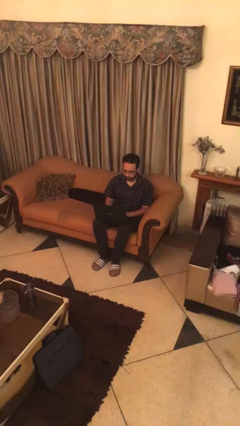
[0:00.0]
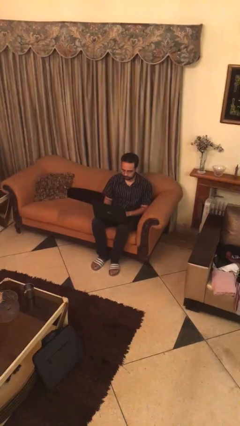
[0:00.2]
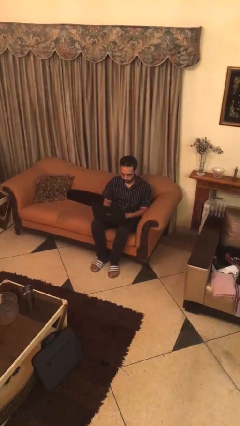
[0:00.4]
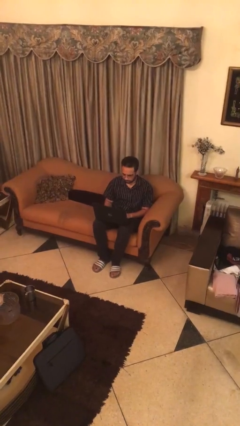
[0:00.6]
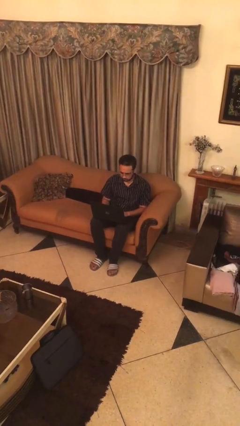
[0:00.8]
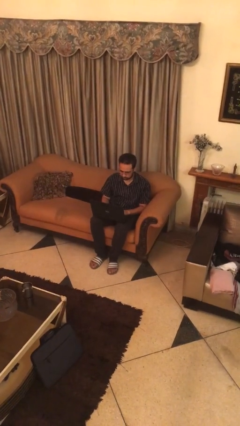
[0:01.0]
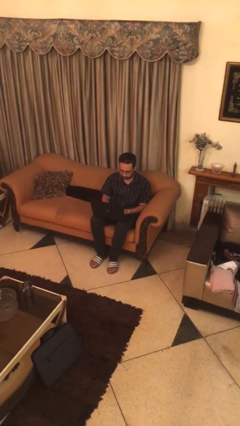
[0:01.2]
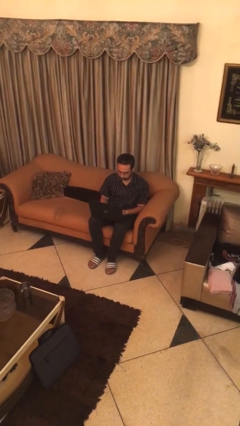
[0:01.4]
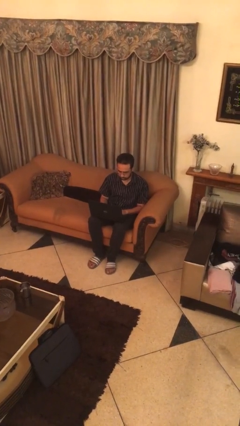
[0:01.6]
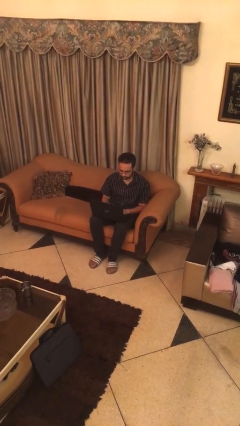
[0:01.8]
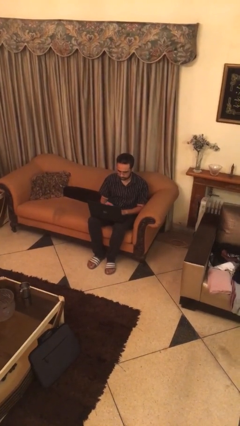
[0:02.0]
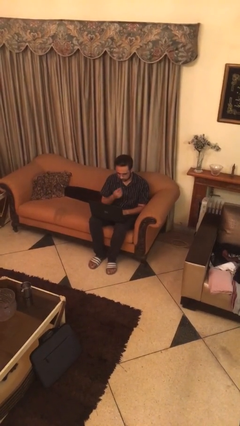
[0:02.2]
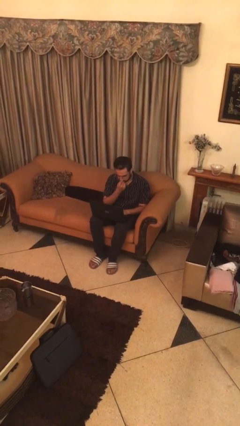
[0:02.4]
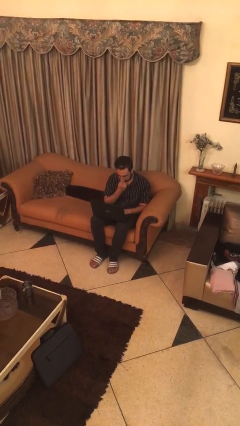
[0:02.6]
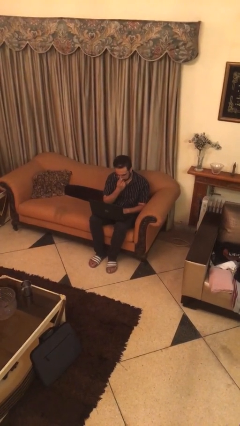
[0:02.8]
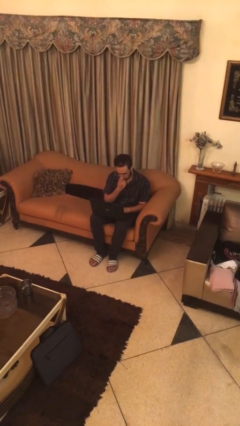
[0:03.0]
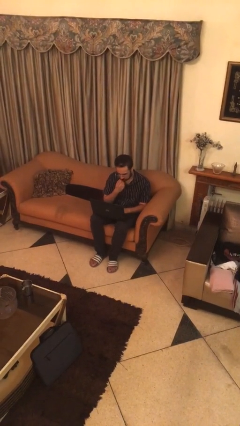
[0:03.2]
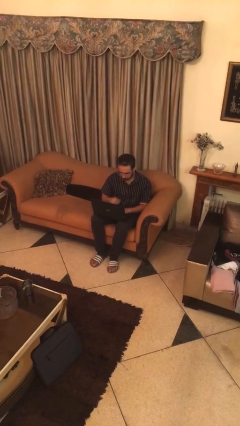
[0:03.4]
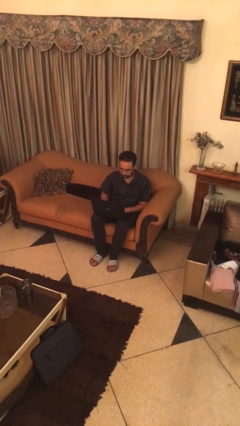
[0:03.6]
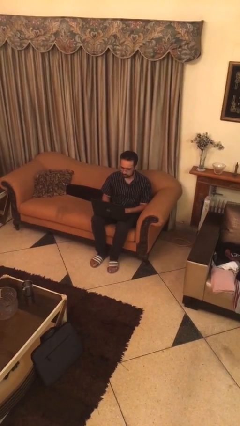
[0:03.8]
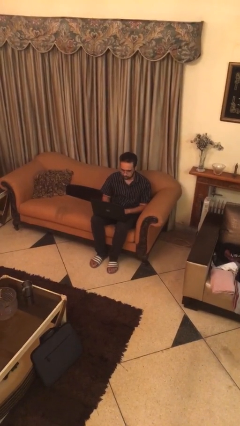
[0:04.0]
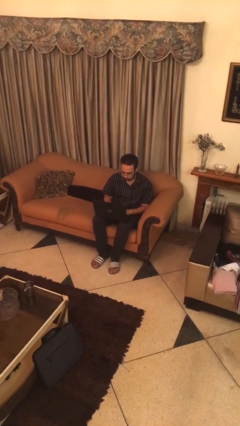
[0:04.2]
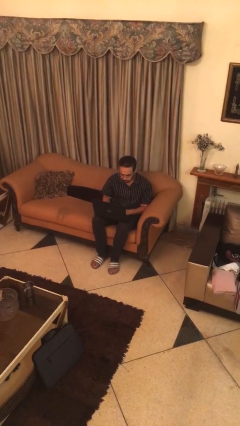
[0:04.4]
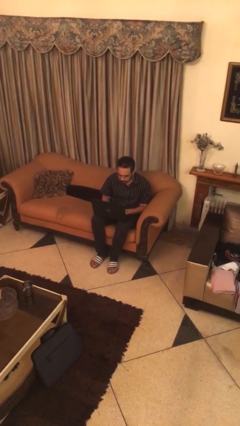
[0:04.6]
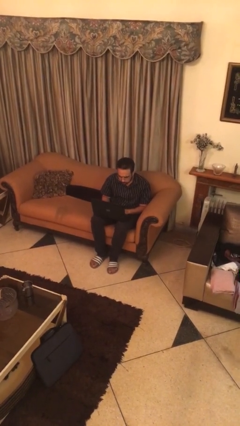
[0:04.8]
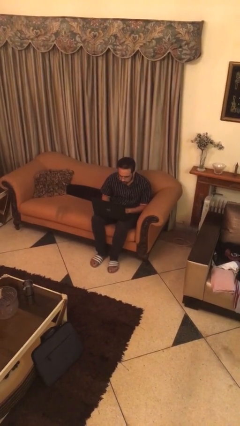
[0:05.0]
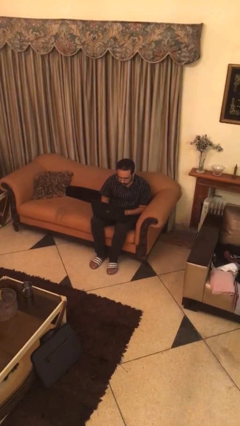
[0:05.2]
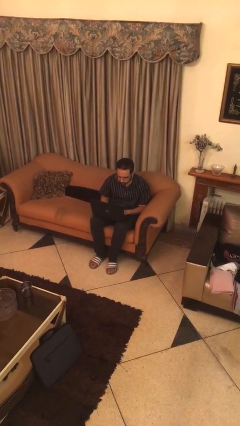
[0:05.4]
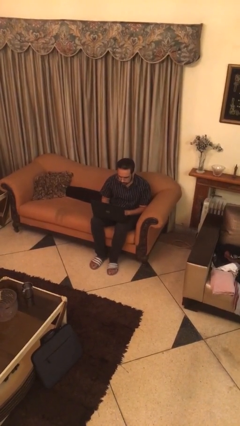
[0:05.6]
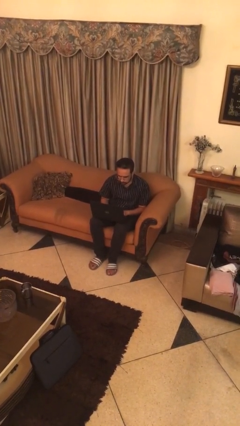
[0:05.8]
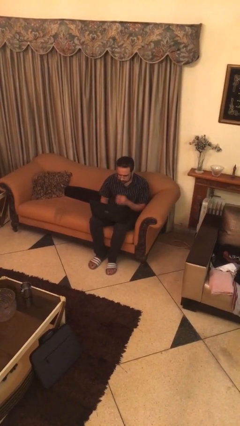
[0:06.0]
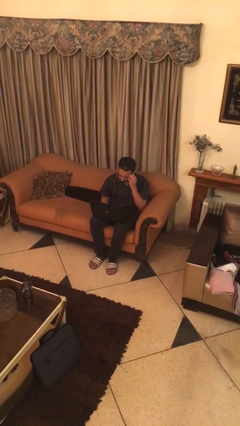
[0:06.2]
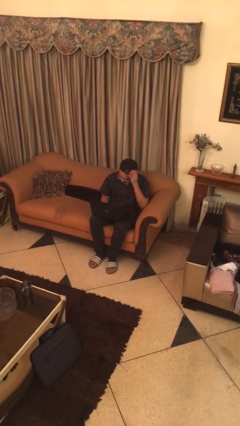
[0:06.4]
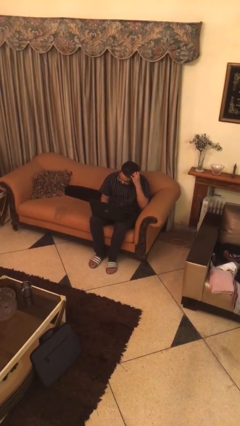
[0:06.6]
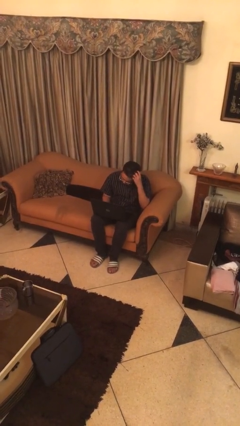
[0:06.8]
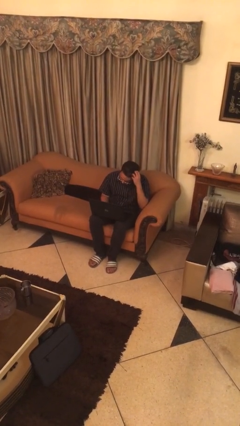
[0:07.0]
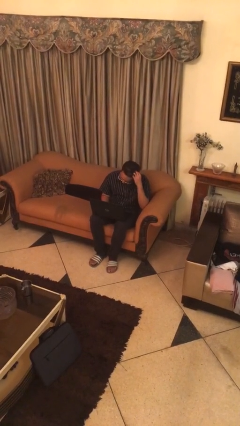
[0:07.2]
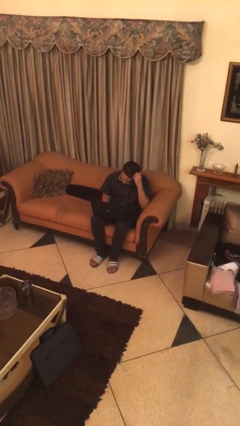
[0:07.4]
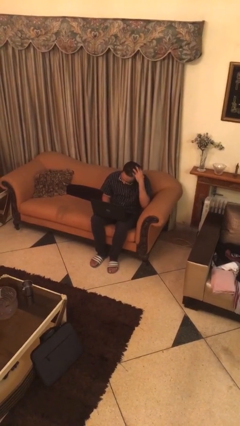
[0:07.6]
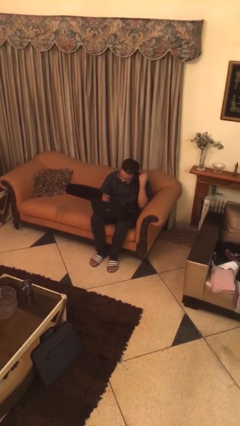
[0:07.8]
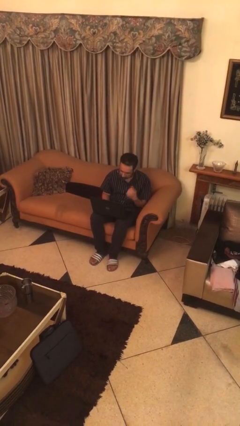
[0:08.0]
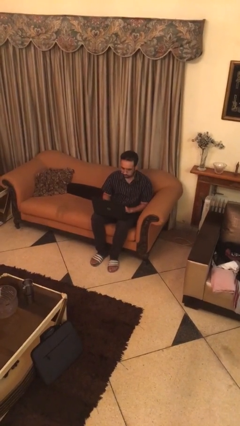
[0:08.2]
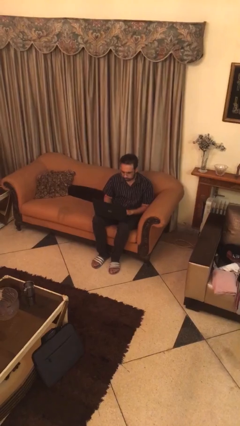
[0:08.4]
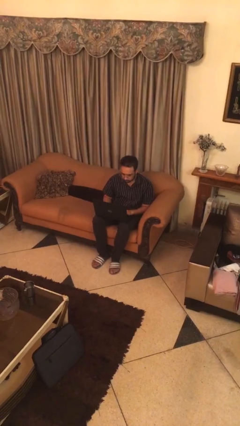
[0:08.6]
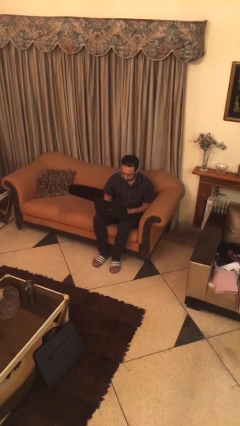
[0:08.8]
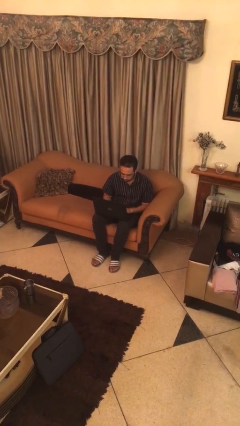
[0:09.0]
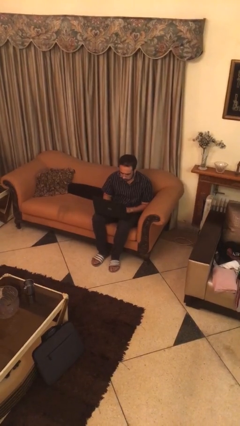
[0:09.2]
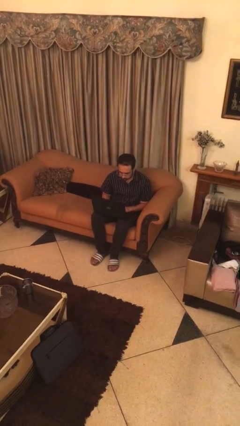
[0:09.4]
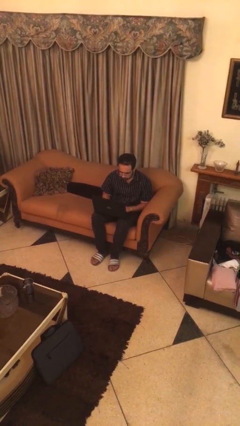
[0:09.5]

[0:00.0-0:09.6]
person interacts with laptop

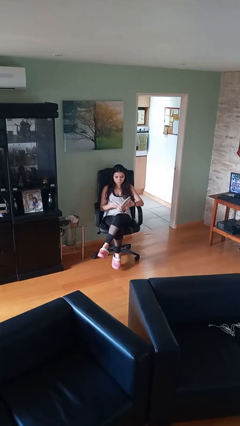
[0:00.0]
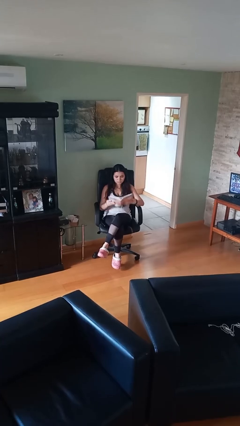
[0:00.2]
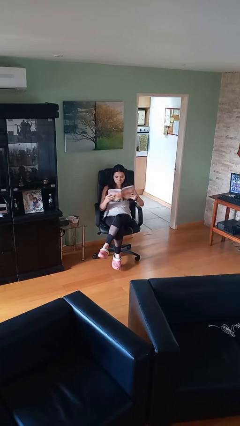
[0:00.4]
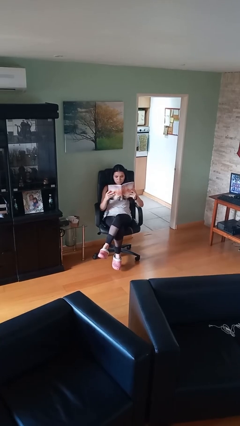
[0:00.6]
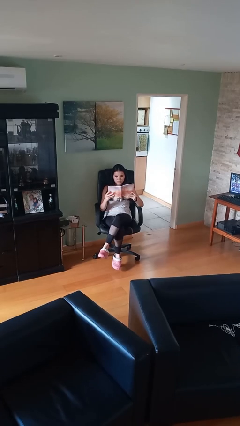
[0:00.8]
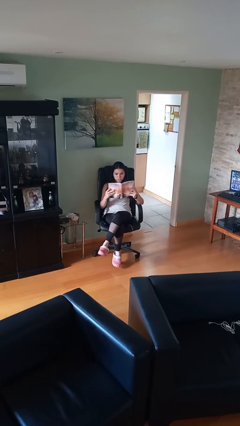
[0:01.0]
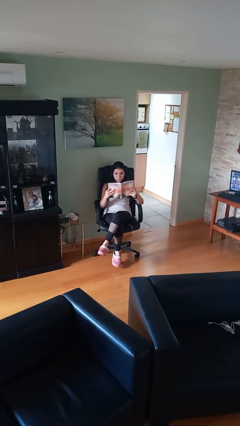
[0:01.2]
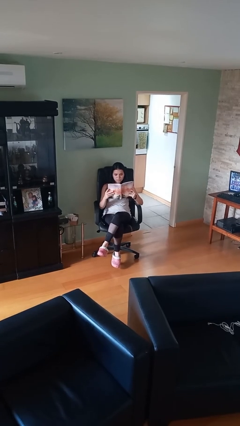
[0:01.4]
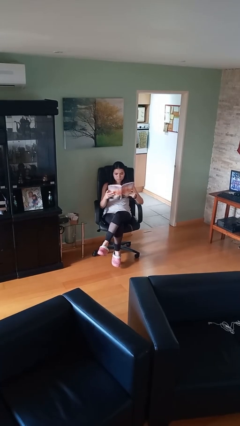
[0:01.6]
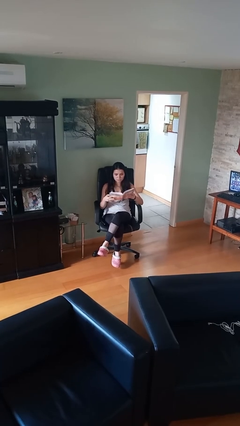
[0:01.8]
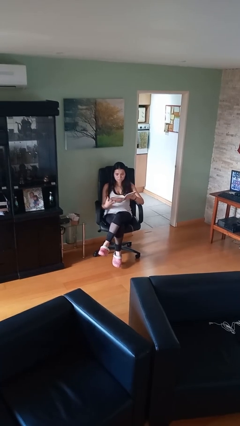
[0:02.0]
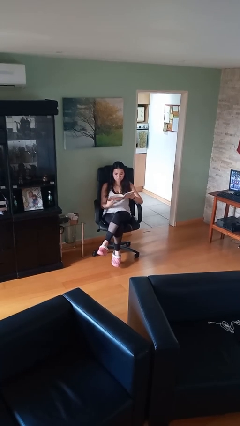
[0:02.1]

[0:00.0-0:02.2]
person reads document

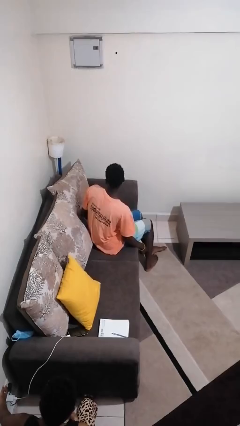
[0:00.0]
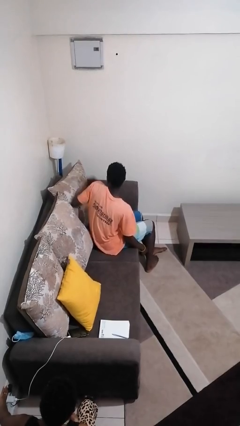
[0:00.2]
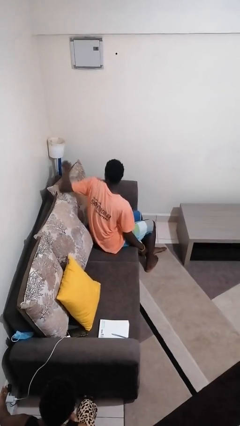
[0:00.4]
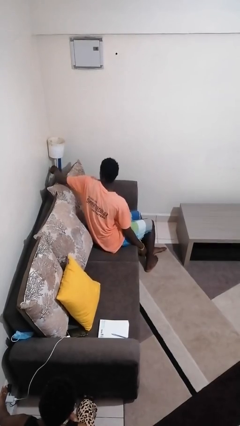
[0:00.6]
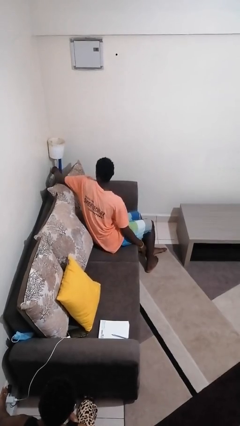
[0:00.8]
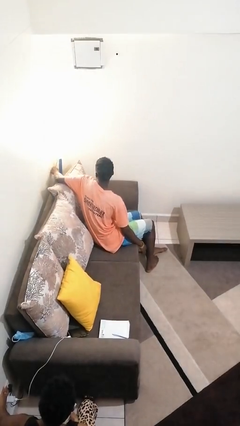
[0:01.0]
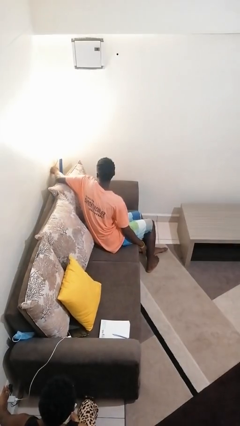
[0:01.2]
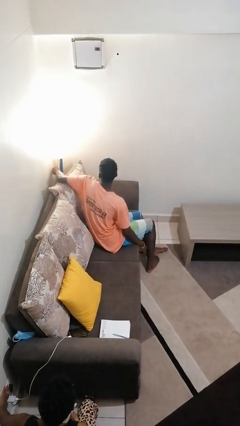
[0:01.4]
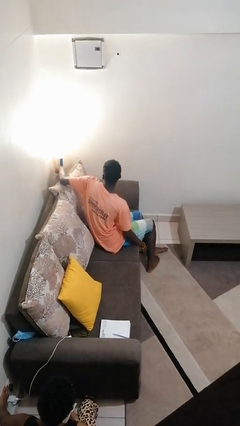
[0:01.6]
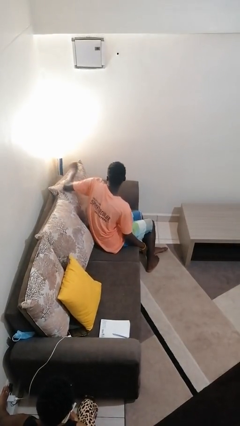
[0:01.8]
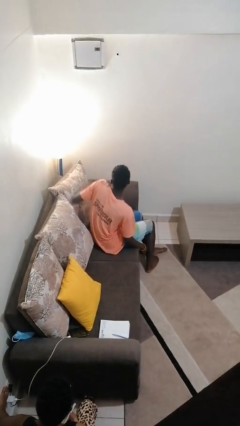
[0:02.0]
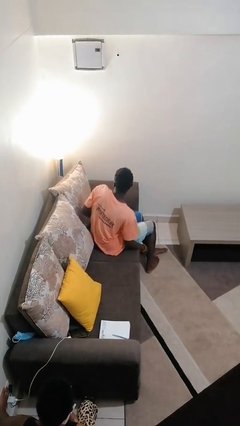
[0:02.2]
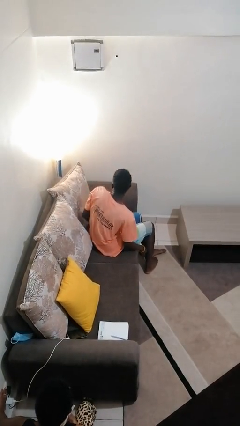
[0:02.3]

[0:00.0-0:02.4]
person turns on lamp

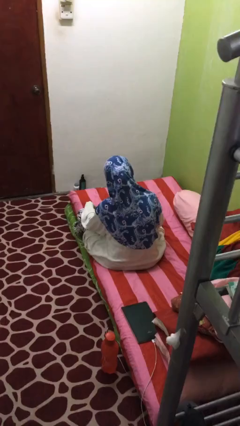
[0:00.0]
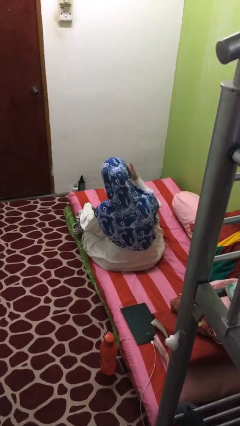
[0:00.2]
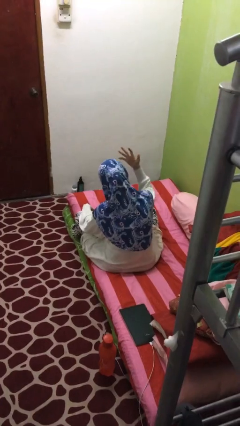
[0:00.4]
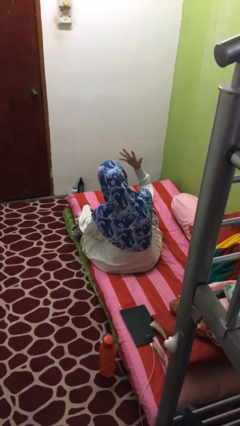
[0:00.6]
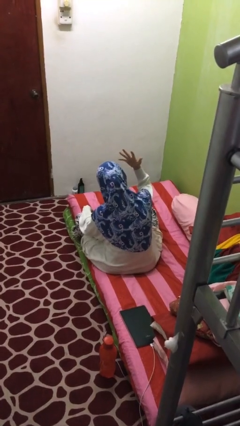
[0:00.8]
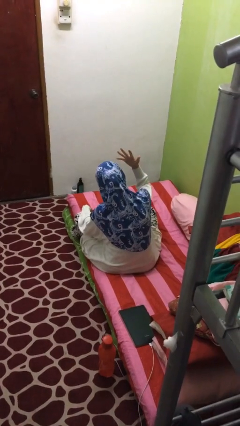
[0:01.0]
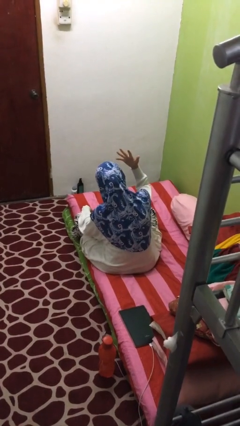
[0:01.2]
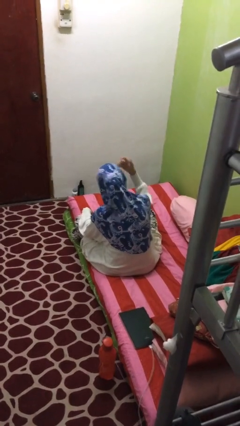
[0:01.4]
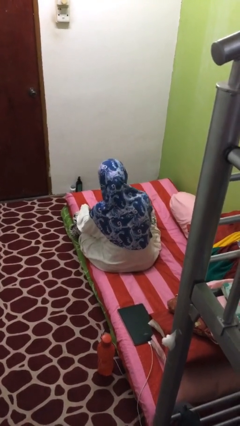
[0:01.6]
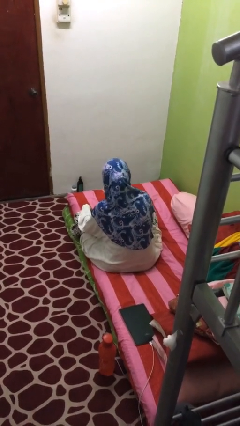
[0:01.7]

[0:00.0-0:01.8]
person gestures number five

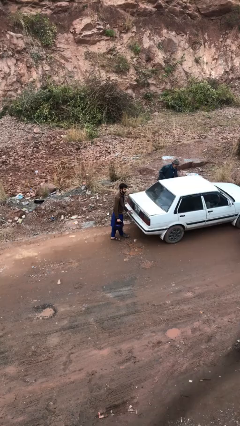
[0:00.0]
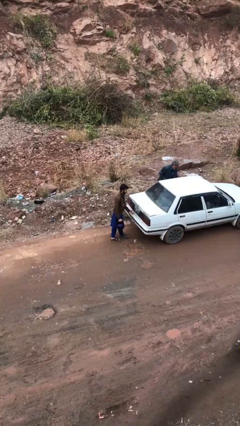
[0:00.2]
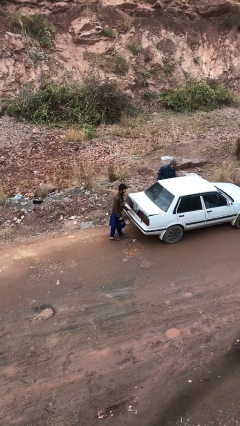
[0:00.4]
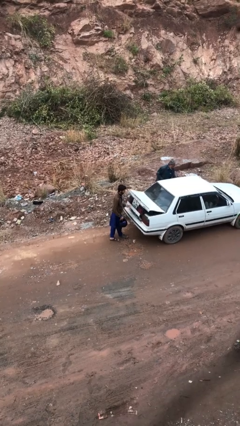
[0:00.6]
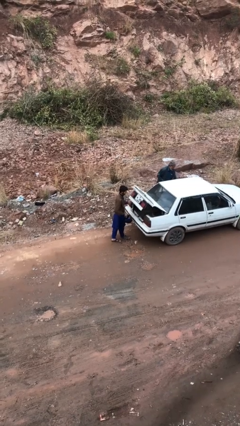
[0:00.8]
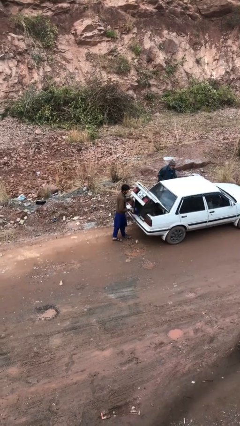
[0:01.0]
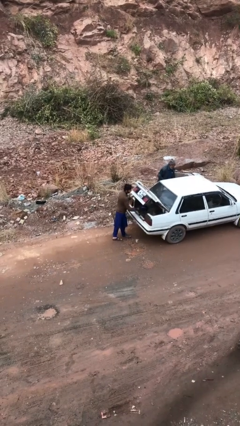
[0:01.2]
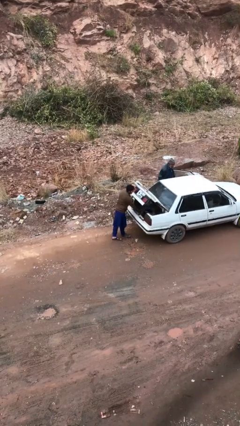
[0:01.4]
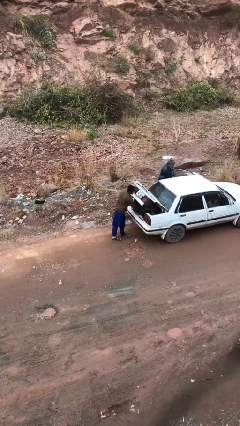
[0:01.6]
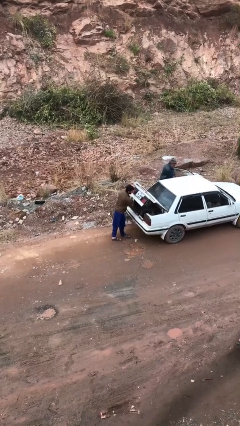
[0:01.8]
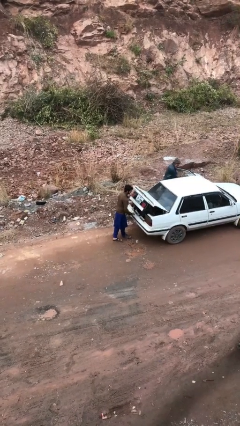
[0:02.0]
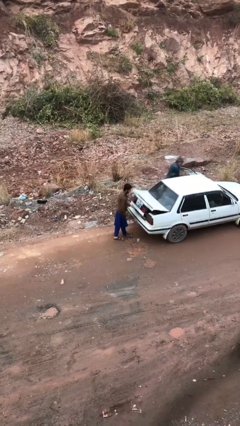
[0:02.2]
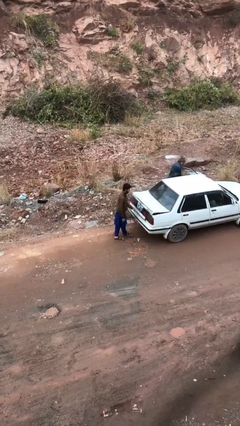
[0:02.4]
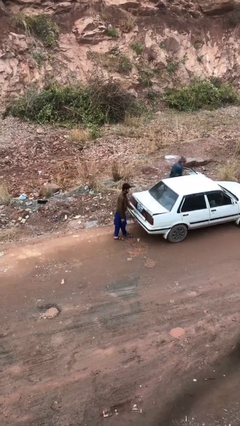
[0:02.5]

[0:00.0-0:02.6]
person loads car
